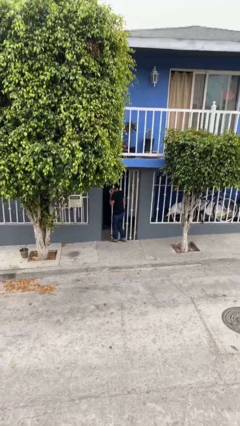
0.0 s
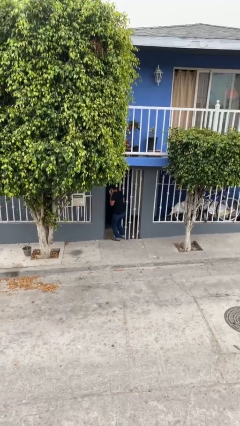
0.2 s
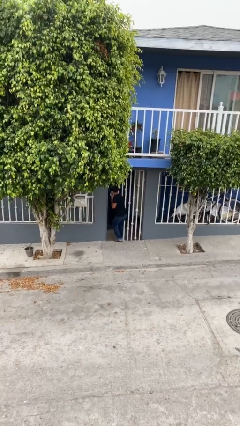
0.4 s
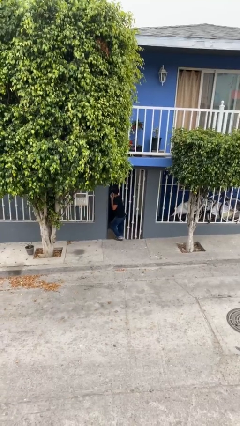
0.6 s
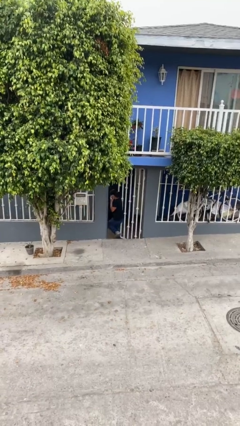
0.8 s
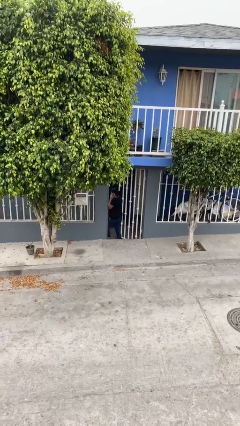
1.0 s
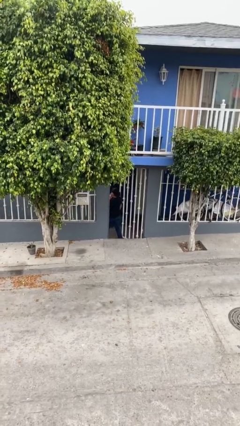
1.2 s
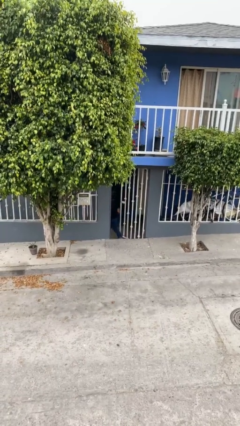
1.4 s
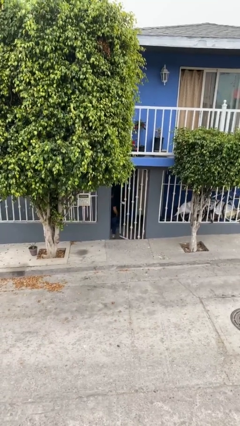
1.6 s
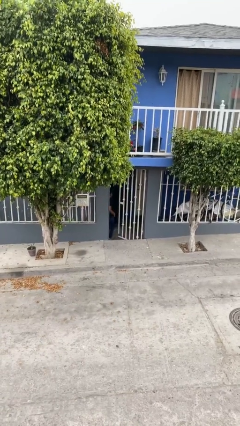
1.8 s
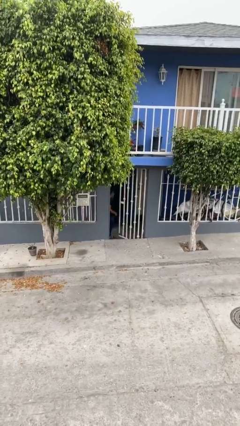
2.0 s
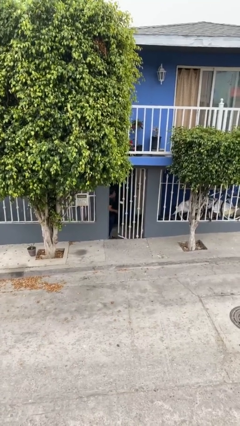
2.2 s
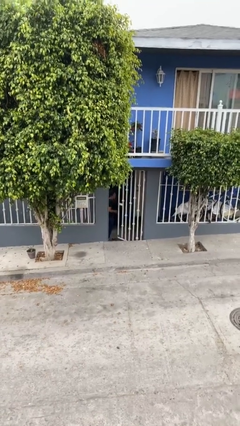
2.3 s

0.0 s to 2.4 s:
person exits scene through structure

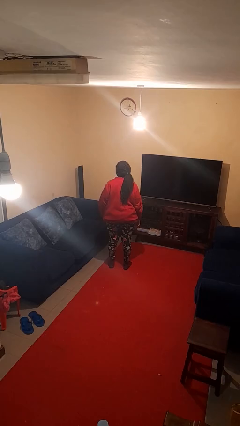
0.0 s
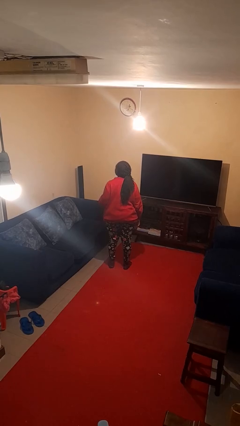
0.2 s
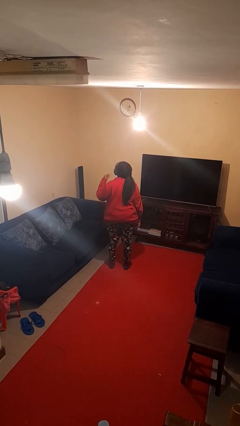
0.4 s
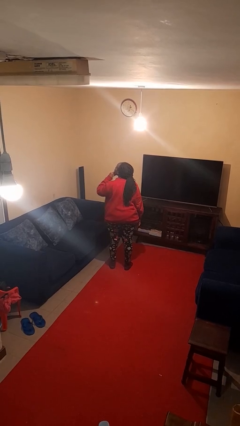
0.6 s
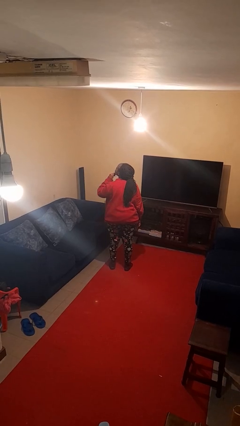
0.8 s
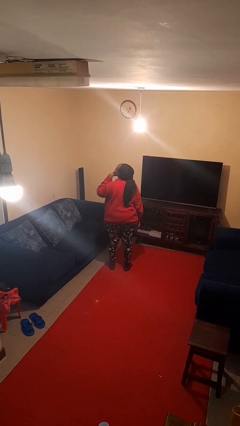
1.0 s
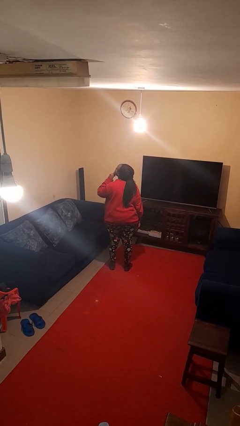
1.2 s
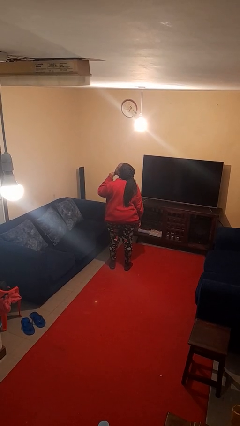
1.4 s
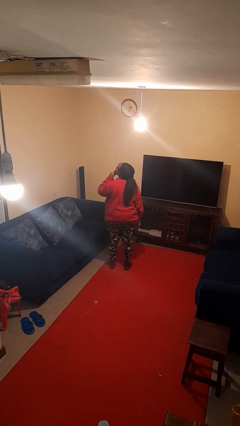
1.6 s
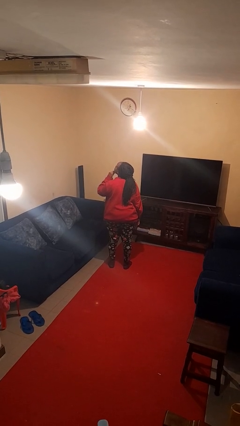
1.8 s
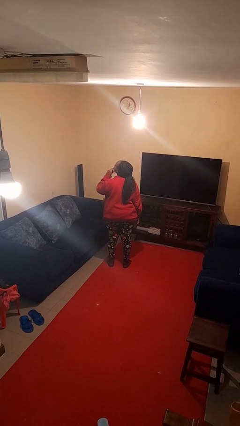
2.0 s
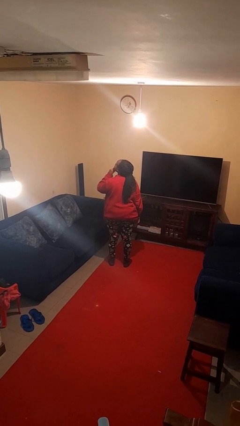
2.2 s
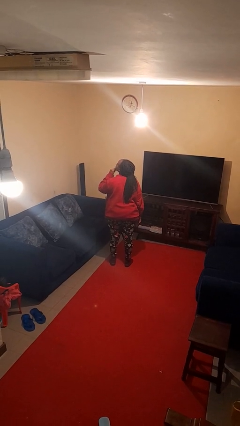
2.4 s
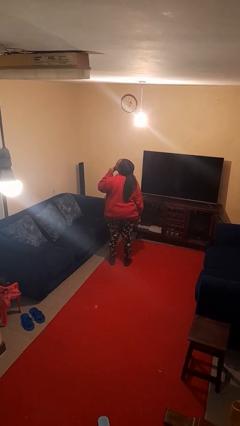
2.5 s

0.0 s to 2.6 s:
person strokes chin

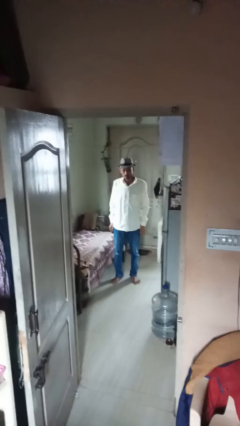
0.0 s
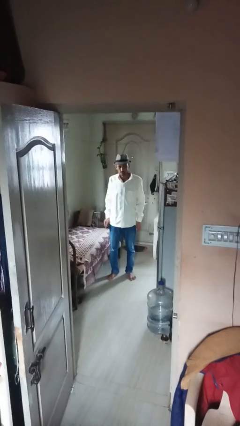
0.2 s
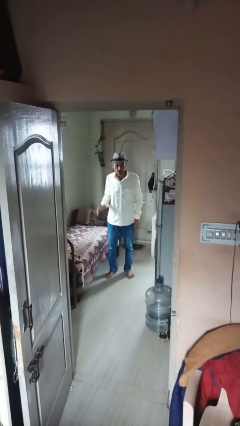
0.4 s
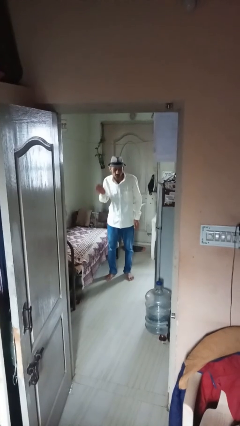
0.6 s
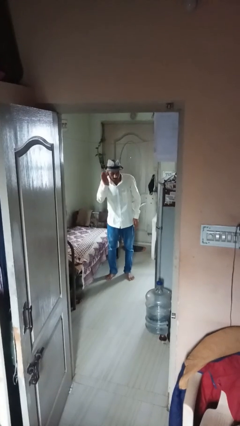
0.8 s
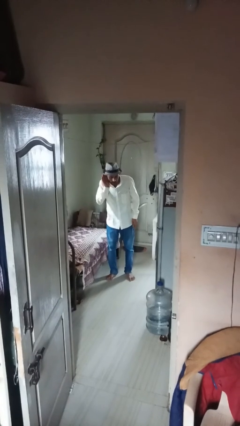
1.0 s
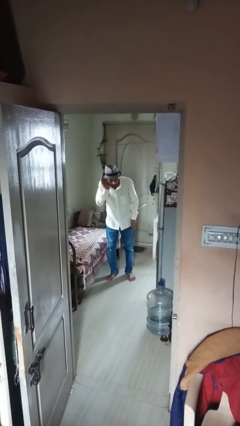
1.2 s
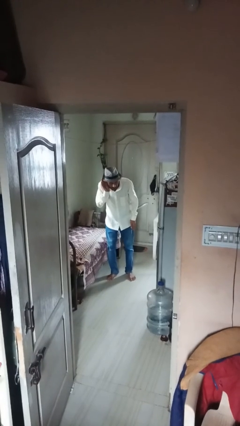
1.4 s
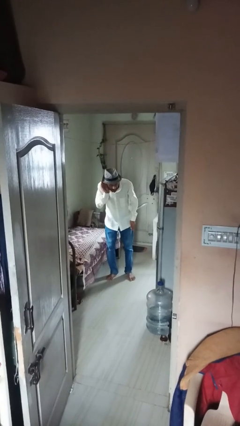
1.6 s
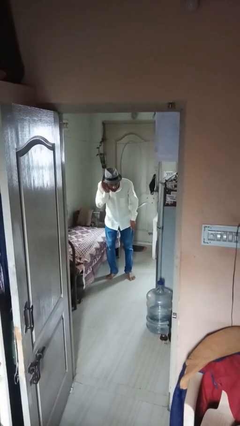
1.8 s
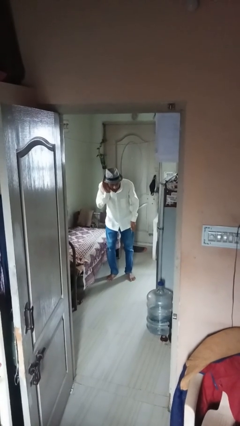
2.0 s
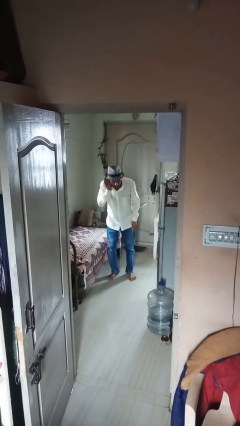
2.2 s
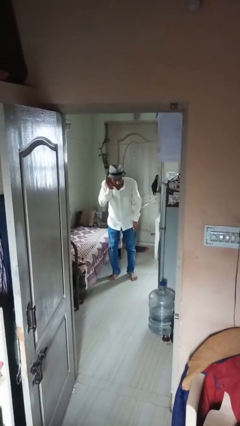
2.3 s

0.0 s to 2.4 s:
person gestures listen closely

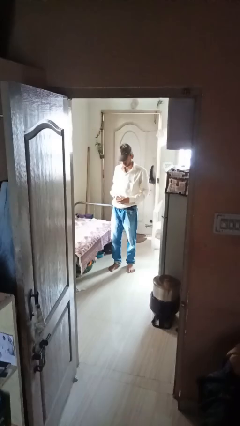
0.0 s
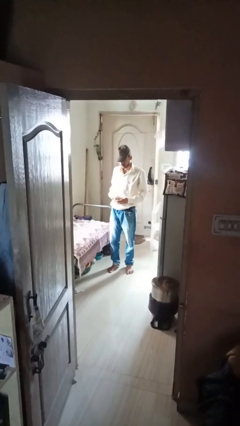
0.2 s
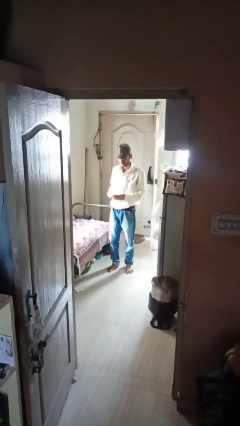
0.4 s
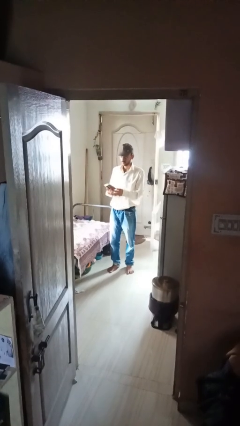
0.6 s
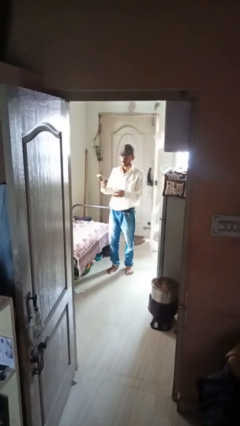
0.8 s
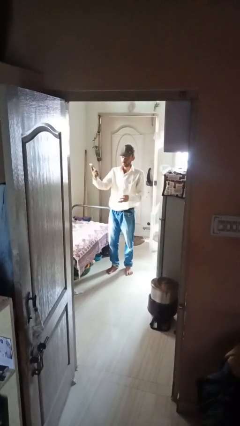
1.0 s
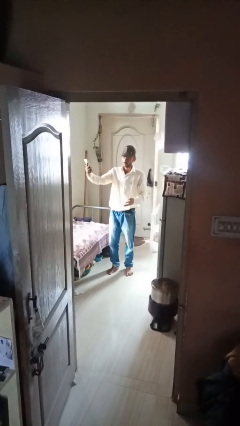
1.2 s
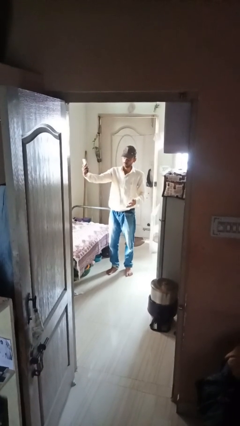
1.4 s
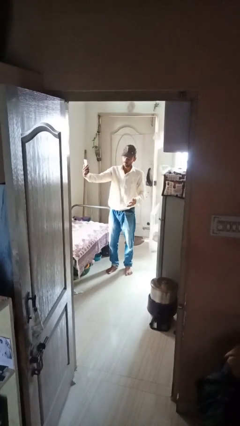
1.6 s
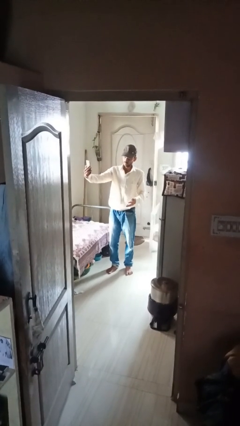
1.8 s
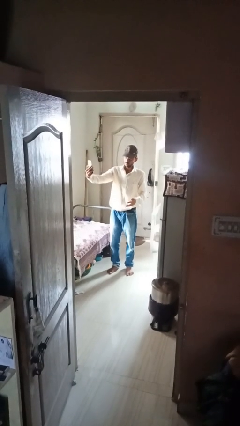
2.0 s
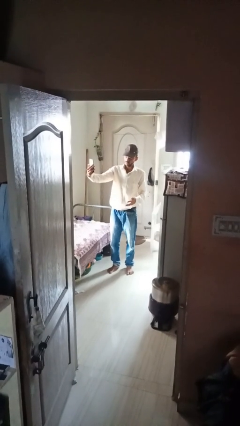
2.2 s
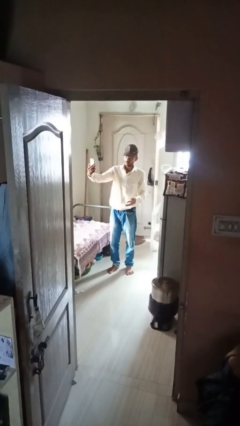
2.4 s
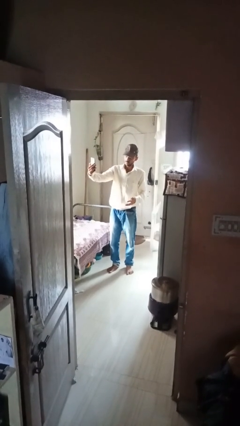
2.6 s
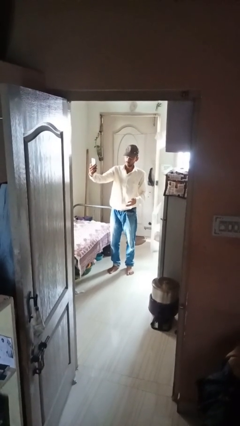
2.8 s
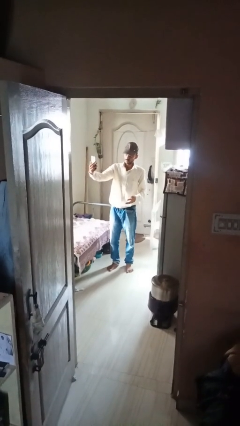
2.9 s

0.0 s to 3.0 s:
person takes selfie

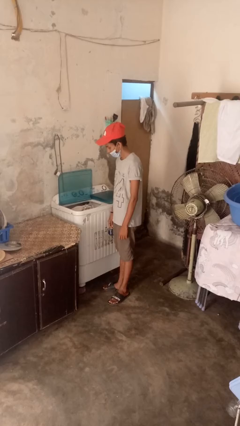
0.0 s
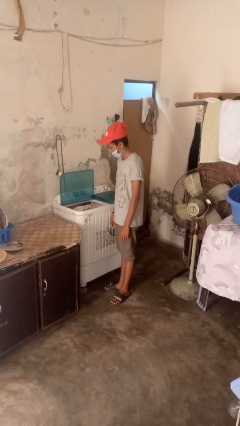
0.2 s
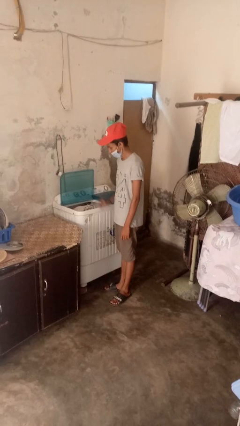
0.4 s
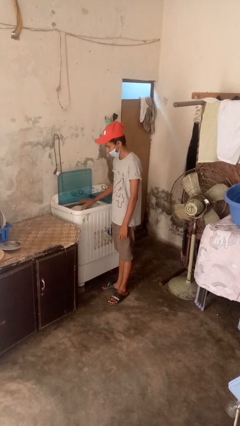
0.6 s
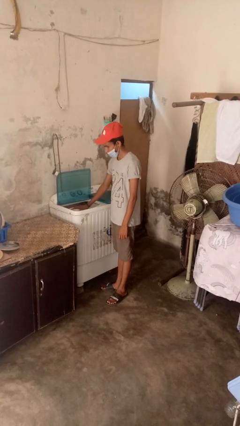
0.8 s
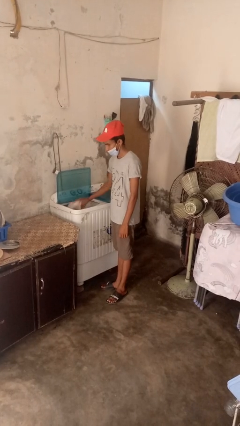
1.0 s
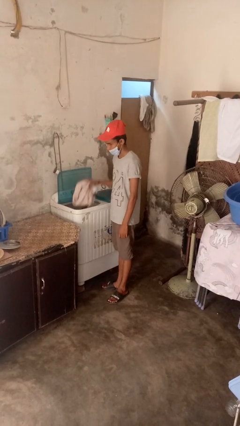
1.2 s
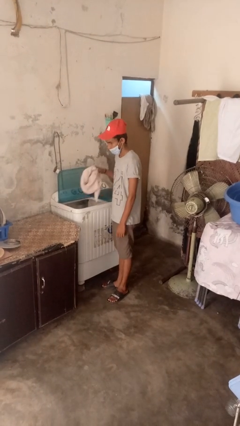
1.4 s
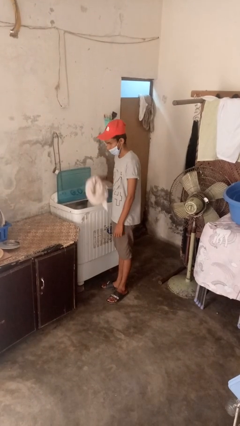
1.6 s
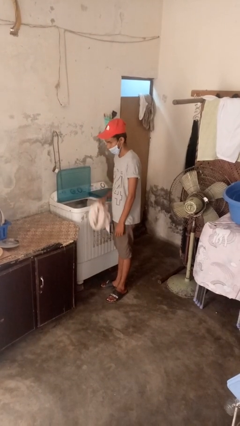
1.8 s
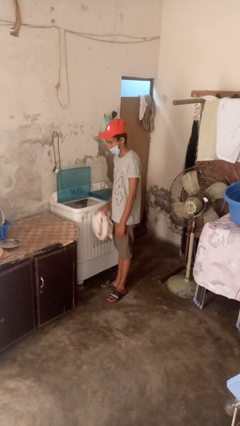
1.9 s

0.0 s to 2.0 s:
person unloads dryer

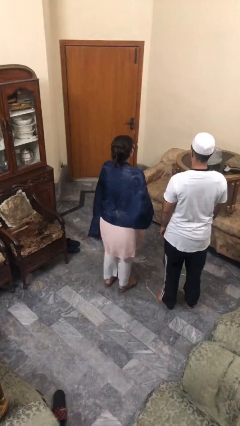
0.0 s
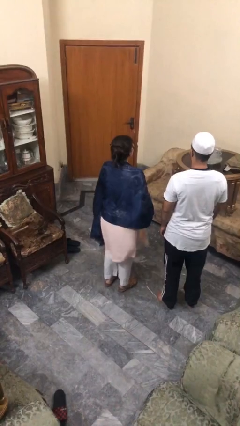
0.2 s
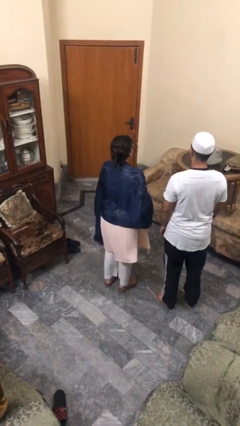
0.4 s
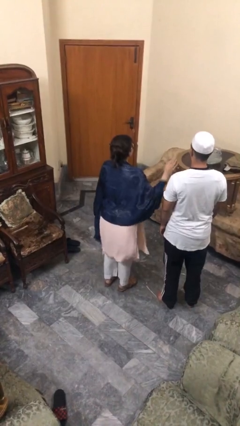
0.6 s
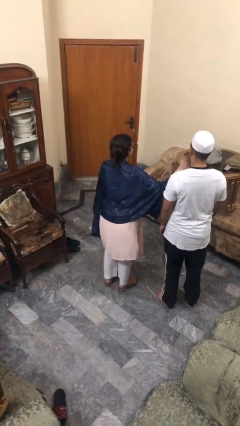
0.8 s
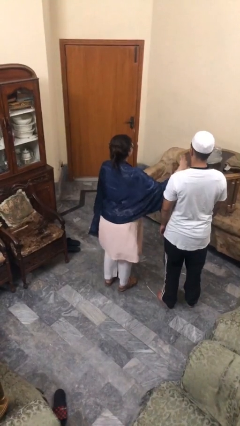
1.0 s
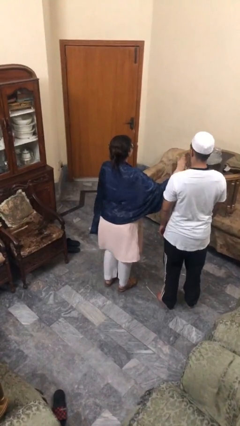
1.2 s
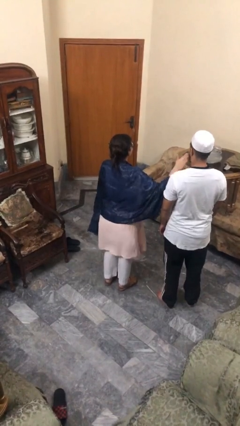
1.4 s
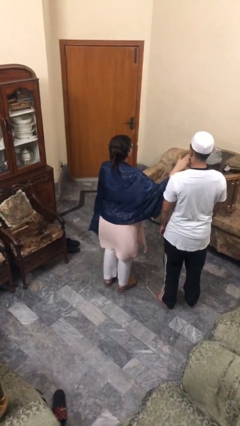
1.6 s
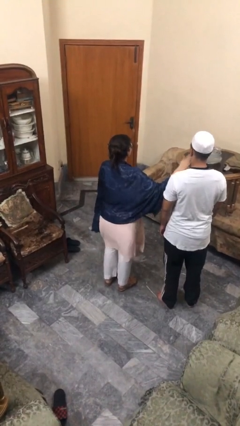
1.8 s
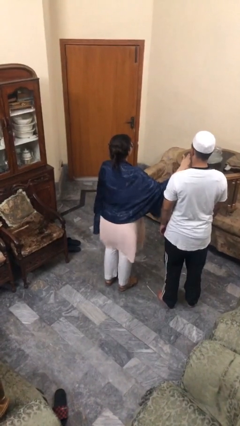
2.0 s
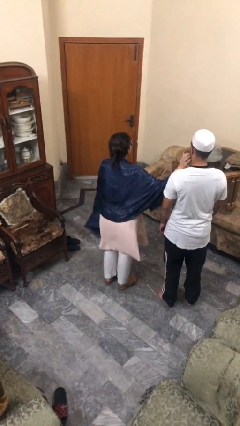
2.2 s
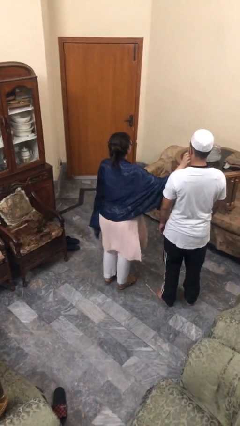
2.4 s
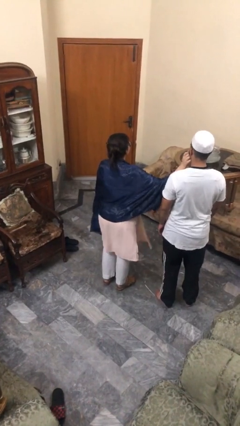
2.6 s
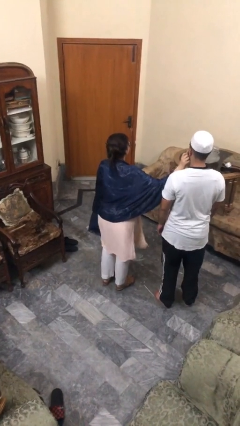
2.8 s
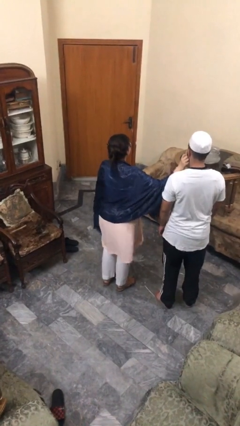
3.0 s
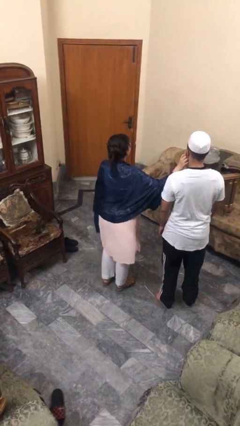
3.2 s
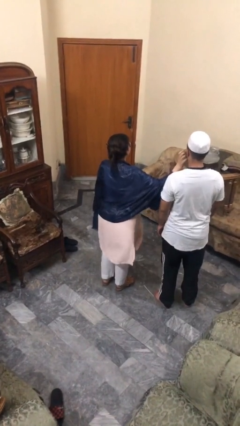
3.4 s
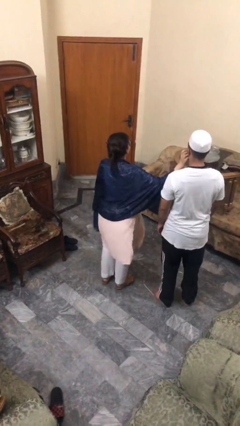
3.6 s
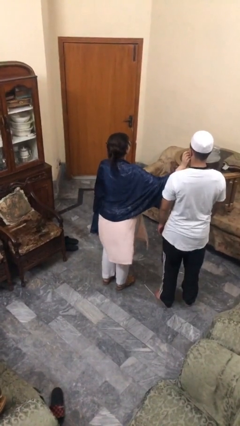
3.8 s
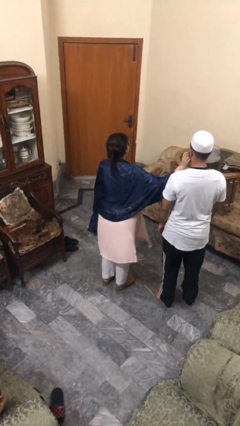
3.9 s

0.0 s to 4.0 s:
person touches face of person

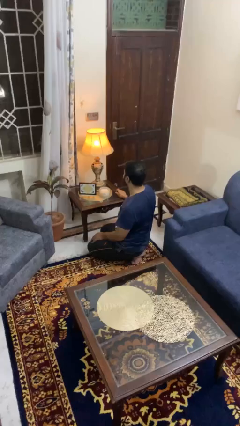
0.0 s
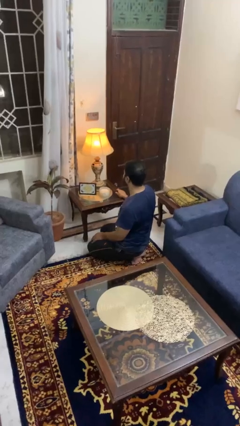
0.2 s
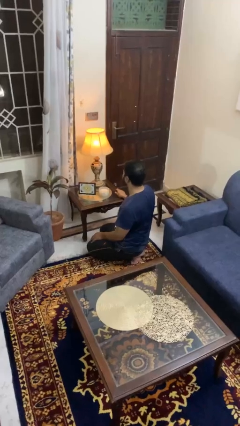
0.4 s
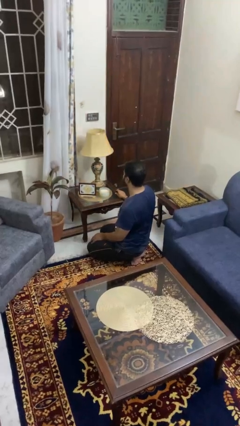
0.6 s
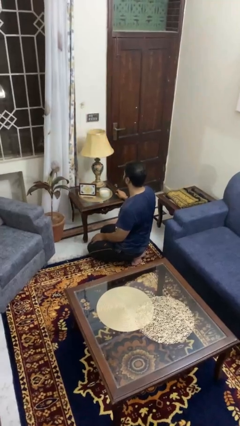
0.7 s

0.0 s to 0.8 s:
person turns off lamp

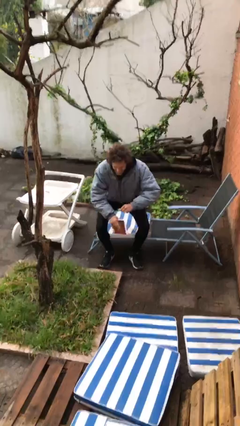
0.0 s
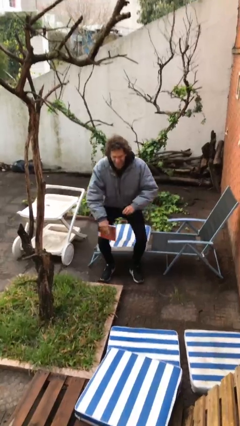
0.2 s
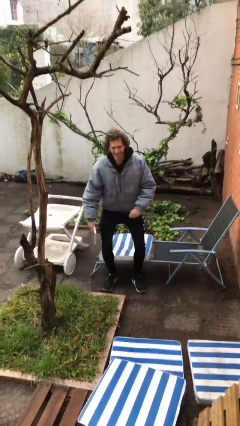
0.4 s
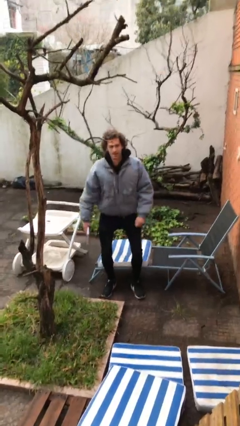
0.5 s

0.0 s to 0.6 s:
person stands up
